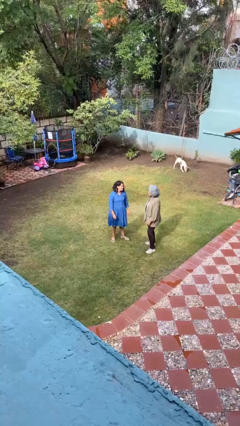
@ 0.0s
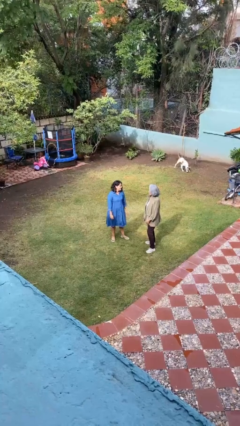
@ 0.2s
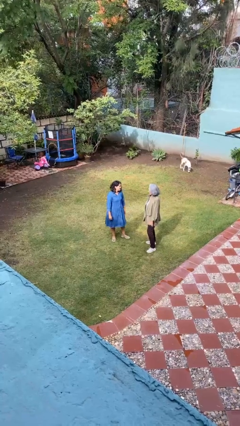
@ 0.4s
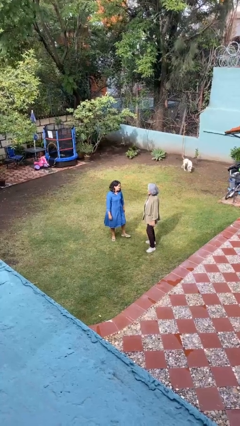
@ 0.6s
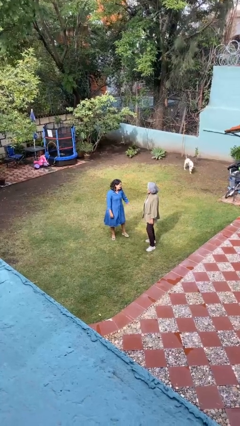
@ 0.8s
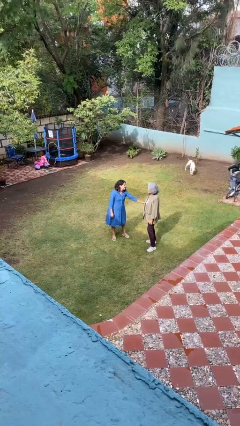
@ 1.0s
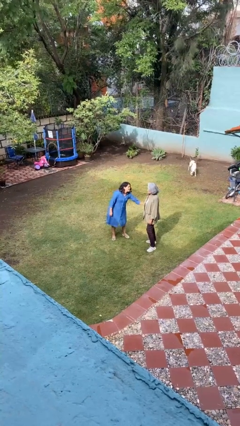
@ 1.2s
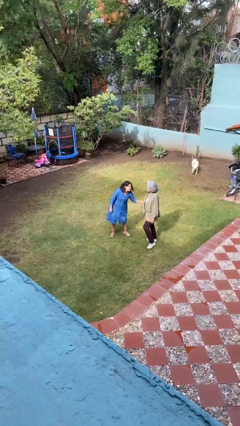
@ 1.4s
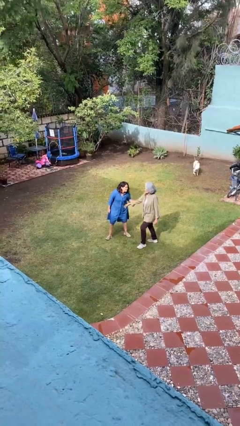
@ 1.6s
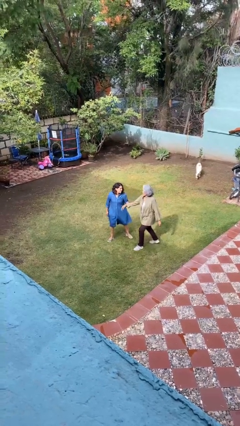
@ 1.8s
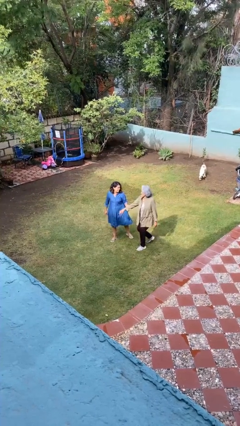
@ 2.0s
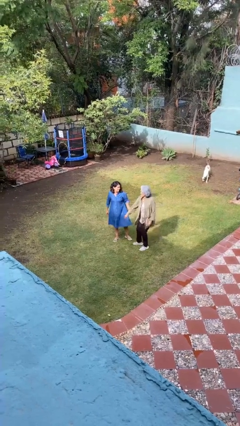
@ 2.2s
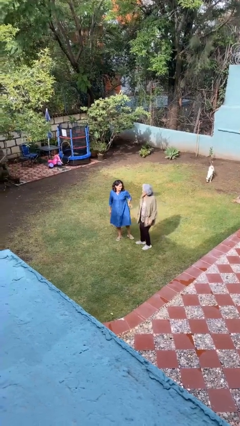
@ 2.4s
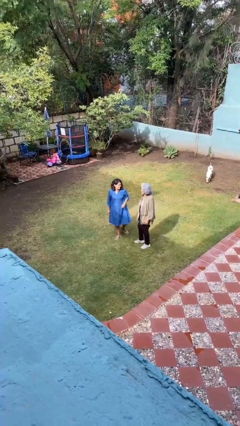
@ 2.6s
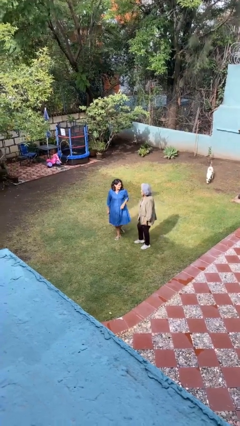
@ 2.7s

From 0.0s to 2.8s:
person grabs person by forearm

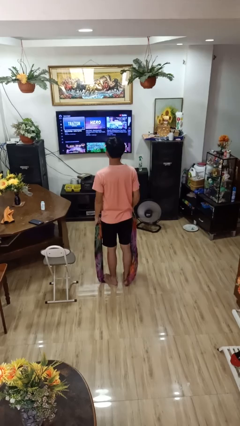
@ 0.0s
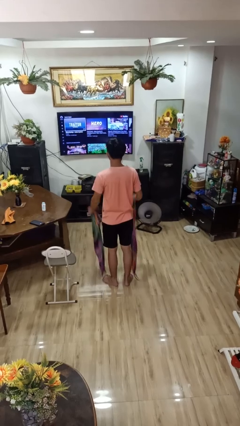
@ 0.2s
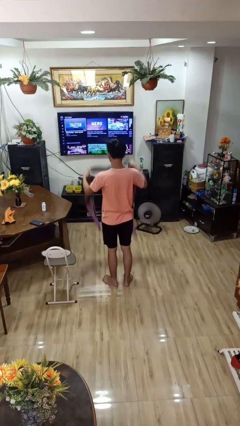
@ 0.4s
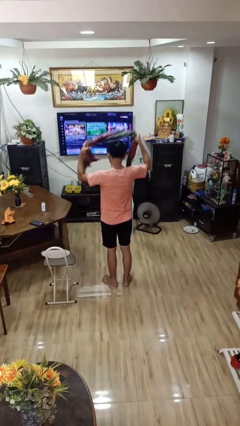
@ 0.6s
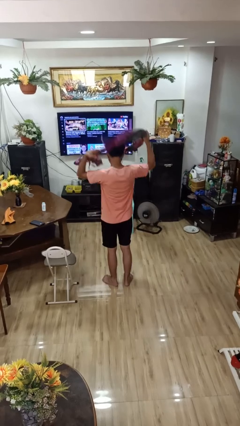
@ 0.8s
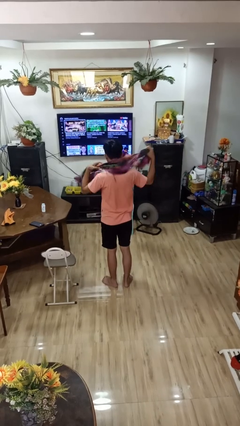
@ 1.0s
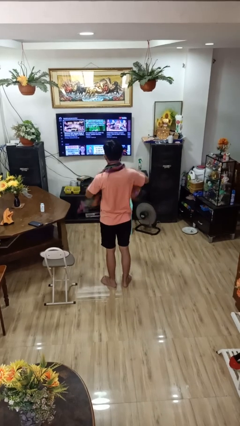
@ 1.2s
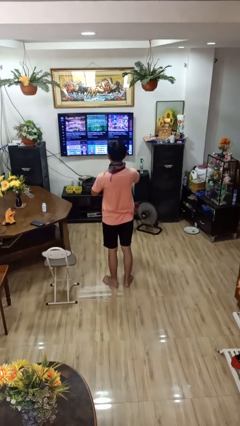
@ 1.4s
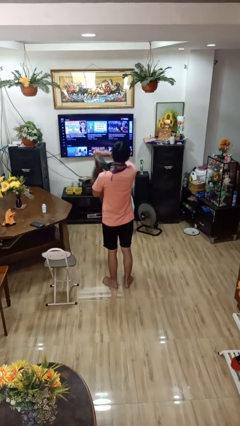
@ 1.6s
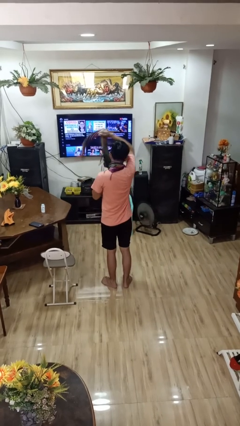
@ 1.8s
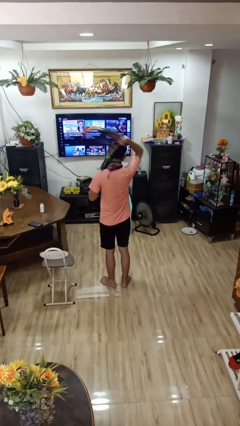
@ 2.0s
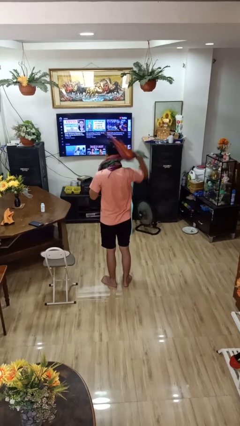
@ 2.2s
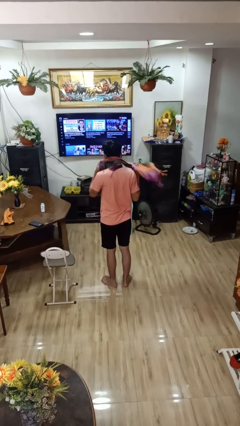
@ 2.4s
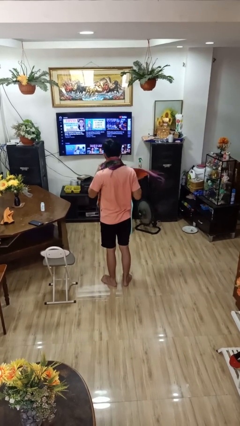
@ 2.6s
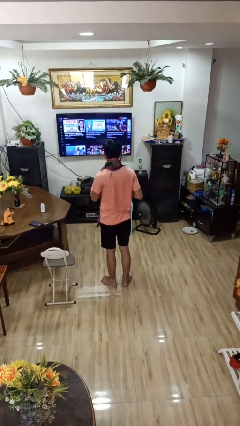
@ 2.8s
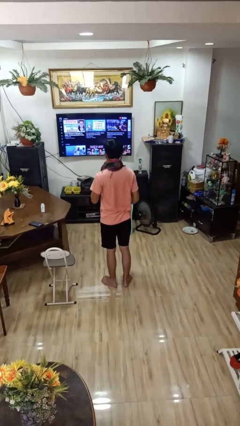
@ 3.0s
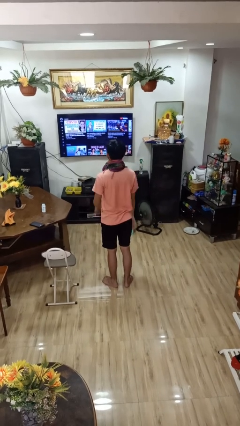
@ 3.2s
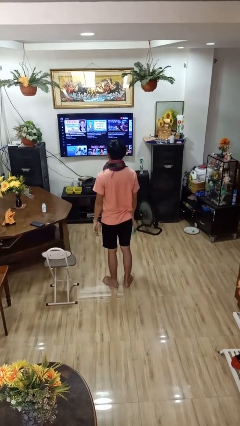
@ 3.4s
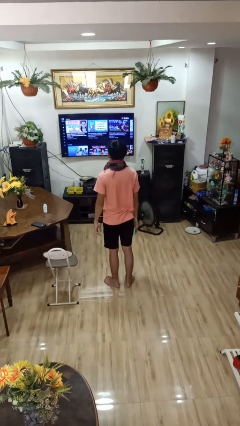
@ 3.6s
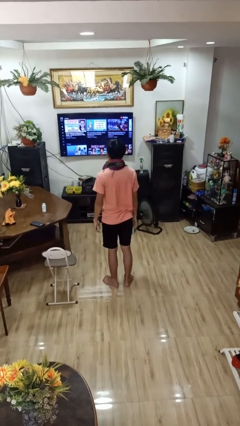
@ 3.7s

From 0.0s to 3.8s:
person puts on scarf

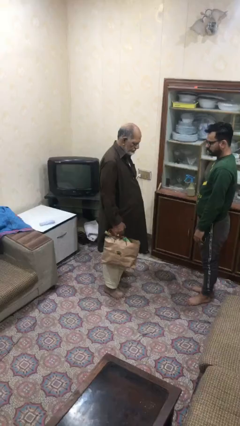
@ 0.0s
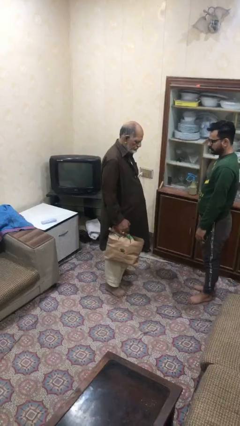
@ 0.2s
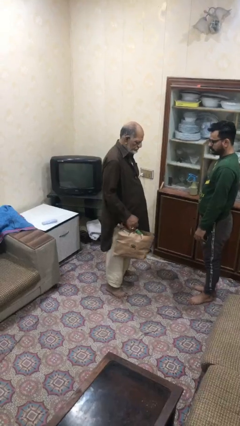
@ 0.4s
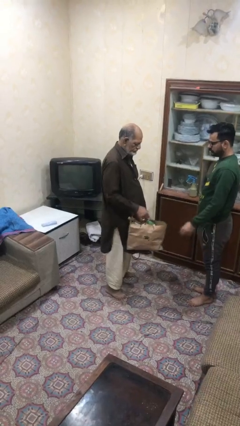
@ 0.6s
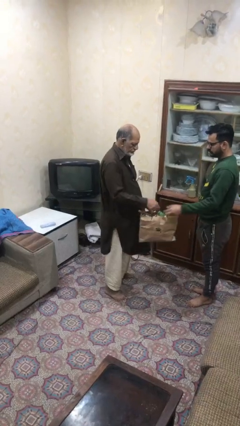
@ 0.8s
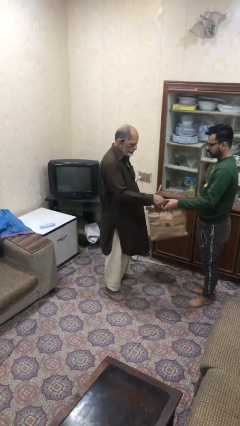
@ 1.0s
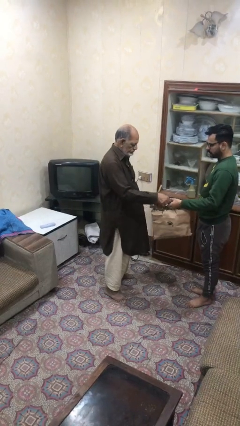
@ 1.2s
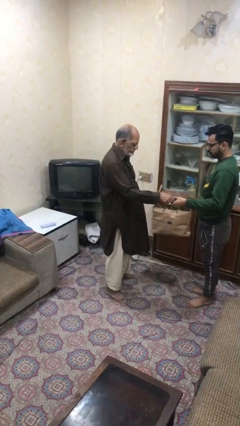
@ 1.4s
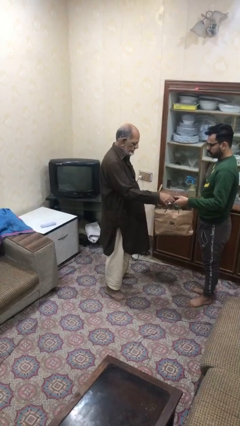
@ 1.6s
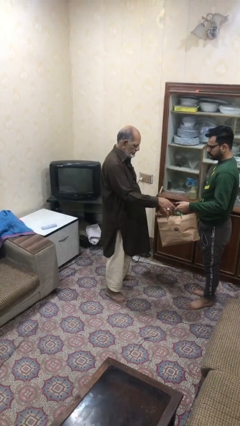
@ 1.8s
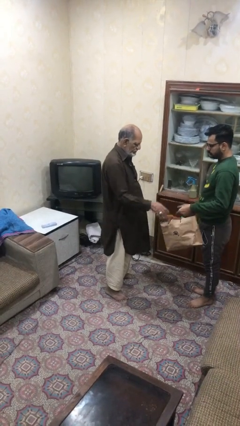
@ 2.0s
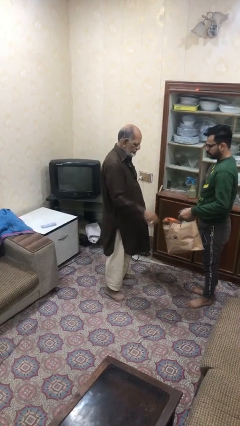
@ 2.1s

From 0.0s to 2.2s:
person transfers object to person

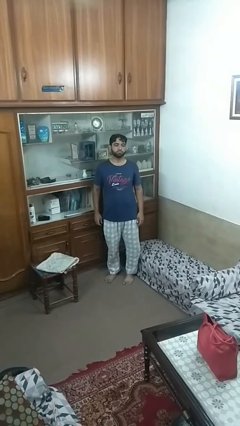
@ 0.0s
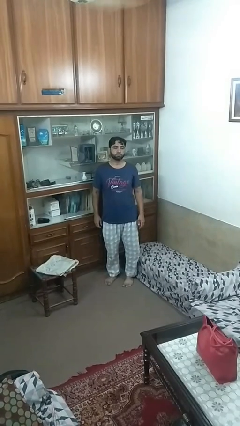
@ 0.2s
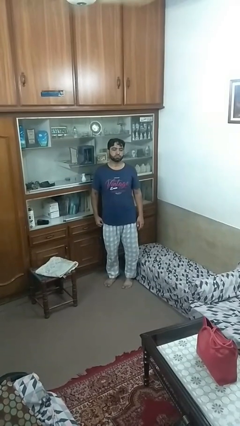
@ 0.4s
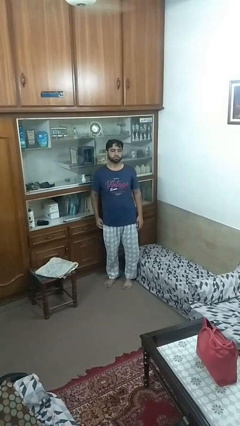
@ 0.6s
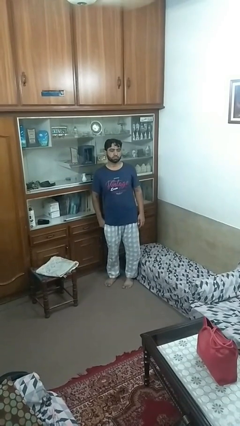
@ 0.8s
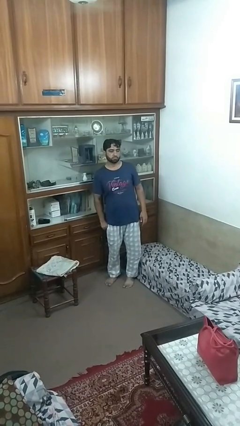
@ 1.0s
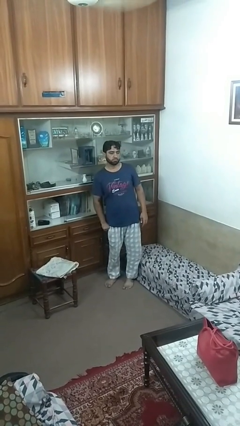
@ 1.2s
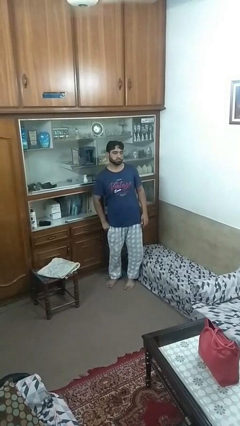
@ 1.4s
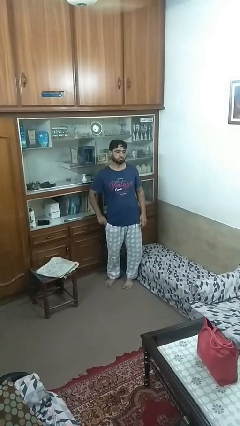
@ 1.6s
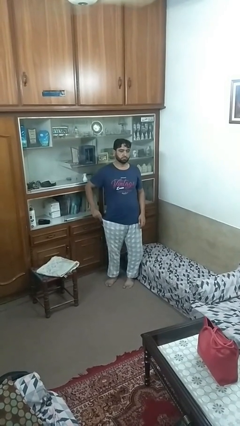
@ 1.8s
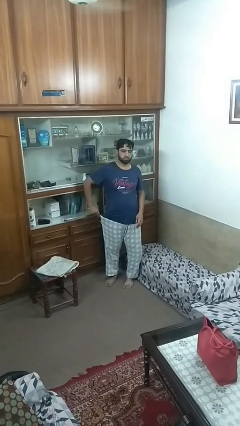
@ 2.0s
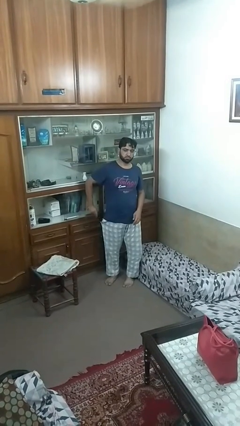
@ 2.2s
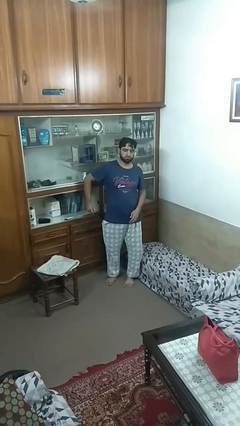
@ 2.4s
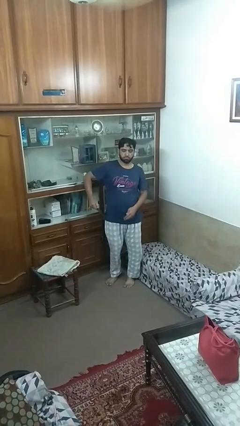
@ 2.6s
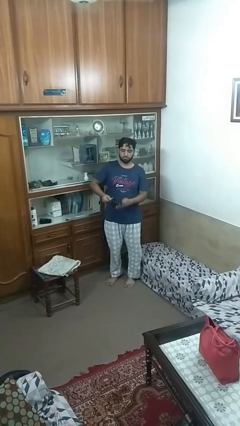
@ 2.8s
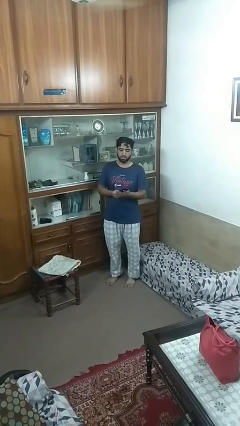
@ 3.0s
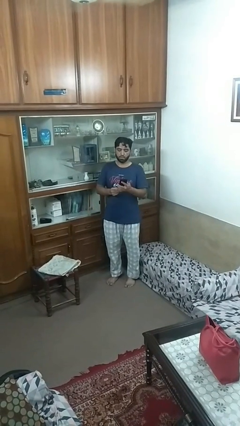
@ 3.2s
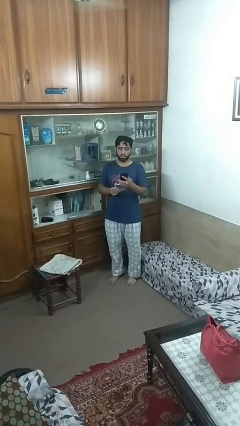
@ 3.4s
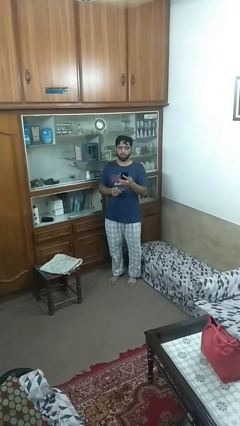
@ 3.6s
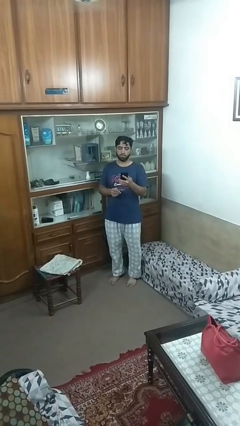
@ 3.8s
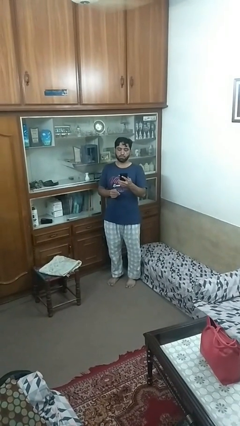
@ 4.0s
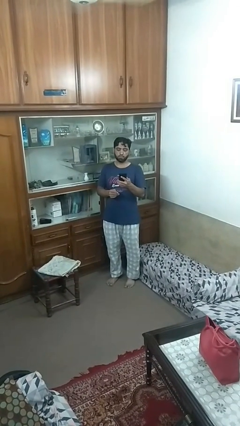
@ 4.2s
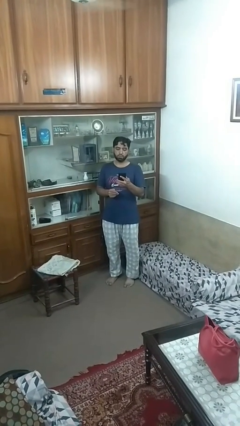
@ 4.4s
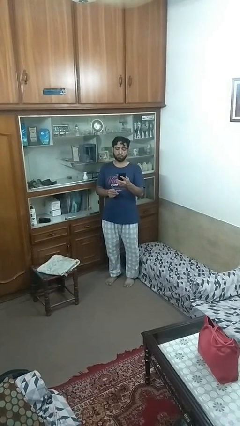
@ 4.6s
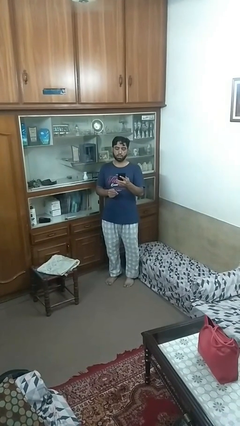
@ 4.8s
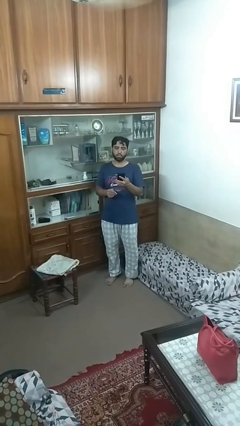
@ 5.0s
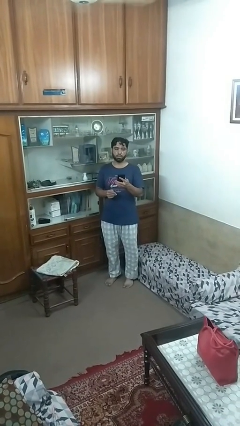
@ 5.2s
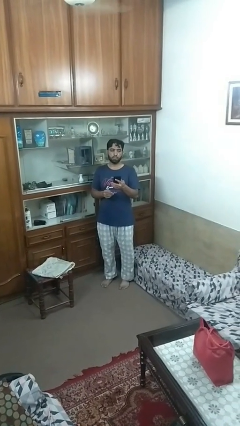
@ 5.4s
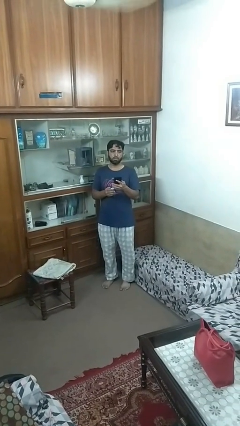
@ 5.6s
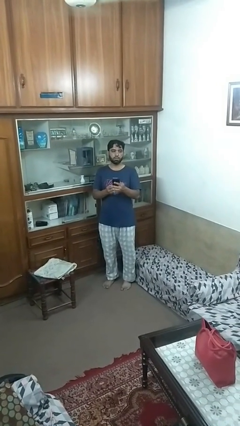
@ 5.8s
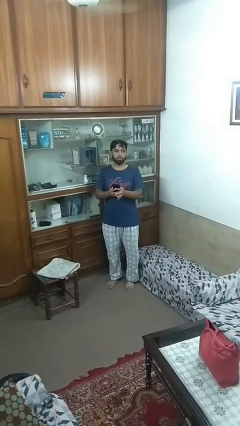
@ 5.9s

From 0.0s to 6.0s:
person takes phone from pocket

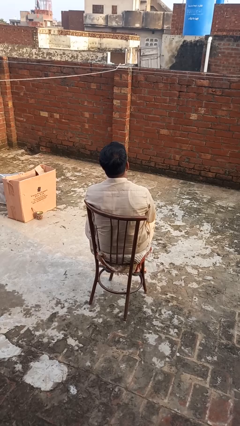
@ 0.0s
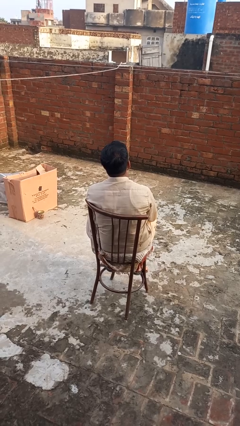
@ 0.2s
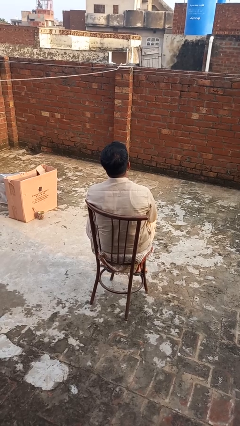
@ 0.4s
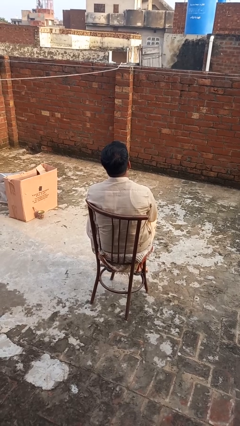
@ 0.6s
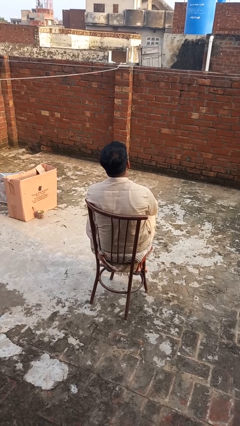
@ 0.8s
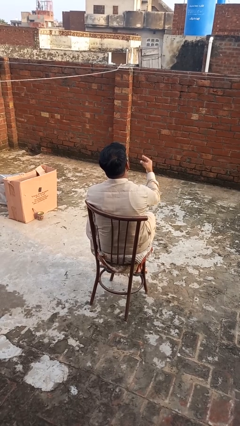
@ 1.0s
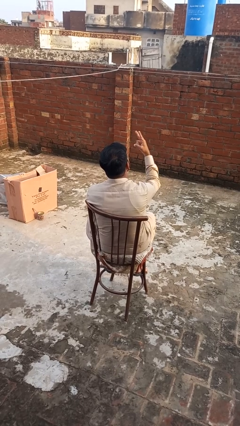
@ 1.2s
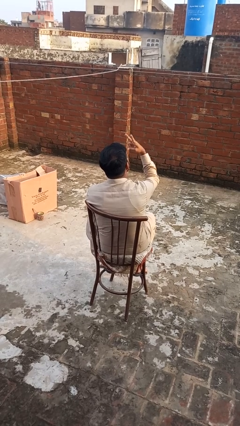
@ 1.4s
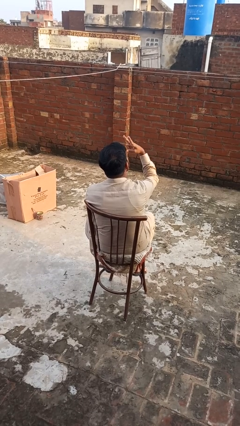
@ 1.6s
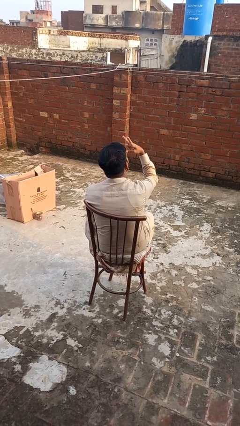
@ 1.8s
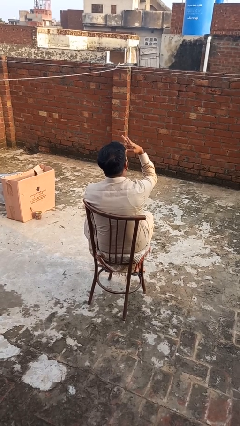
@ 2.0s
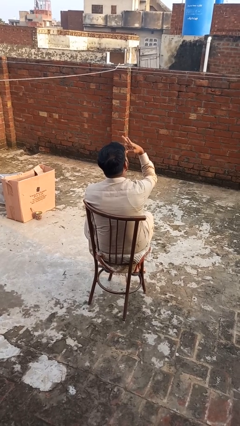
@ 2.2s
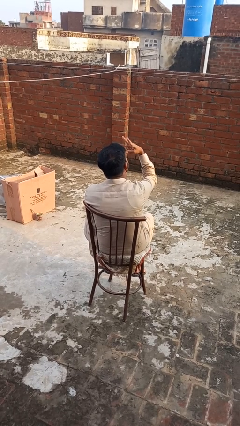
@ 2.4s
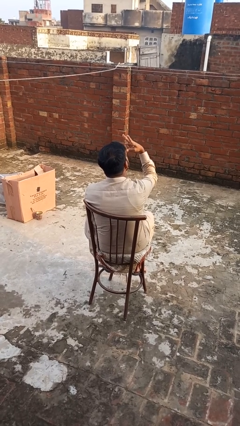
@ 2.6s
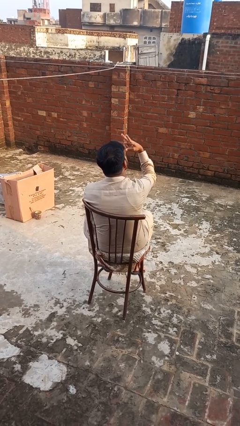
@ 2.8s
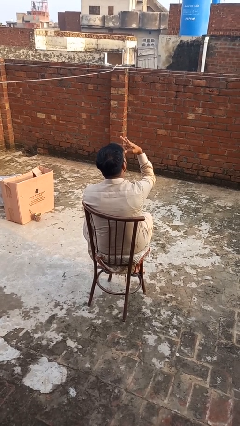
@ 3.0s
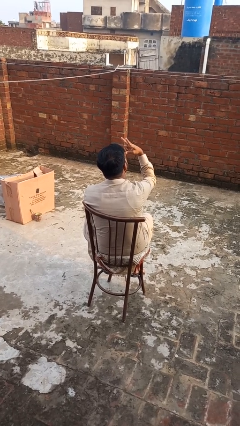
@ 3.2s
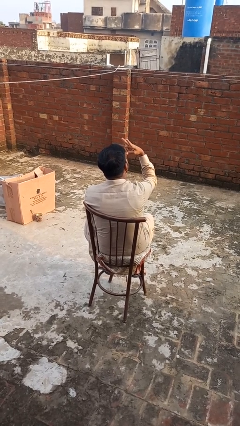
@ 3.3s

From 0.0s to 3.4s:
person gestures watch closely
